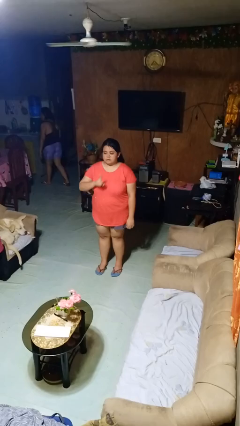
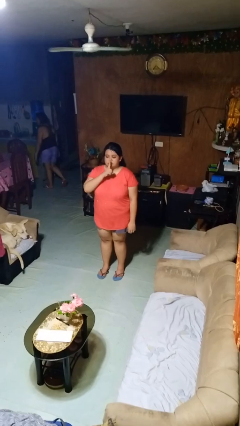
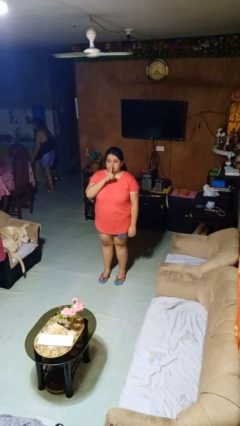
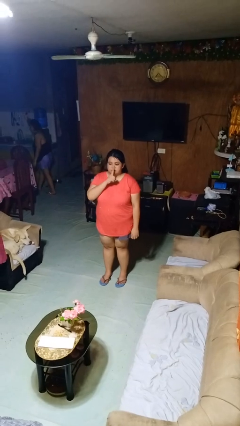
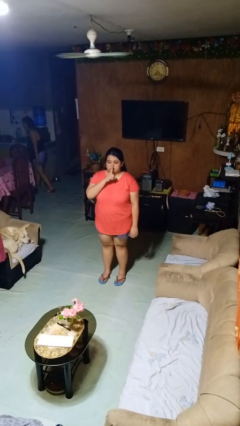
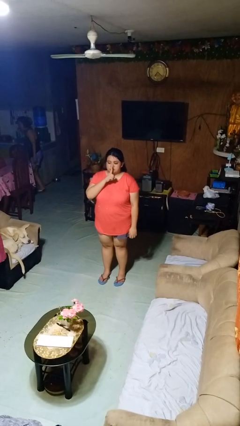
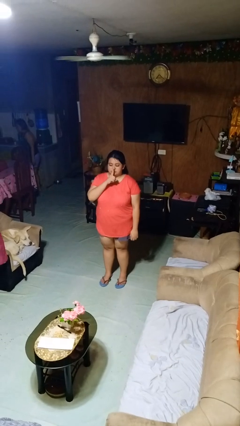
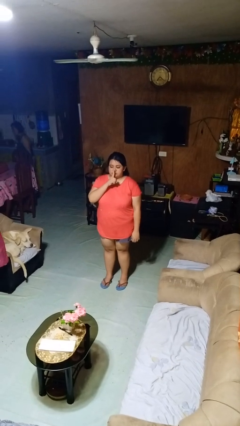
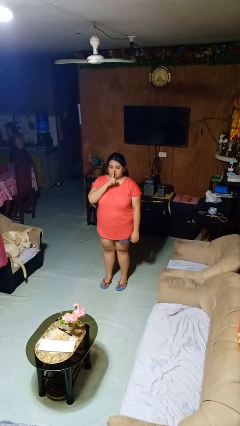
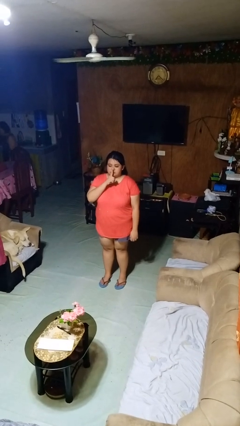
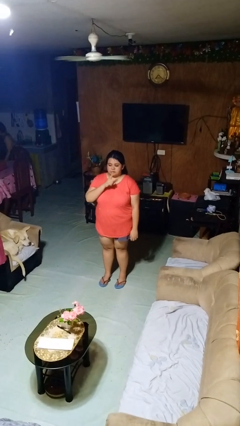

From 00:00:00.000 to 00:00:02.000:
person gestures be quiet

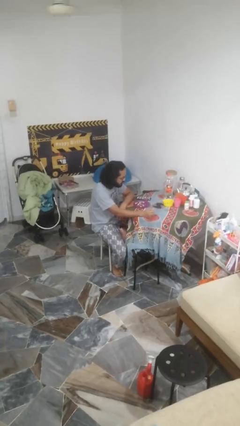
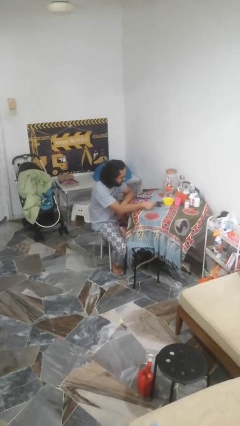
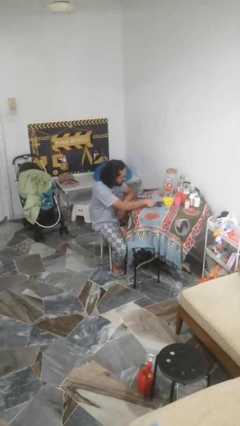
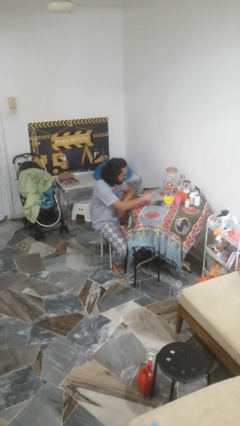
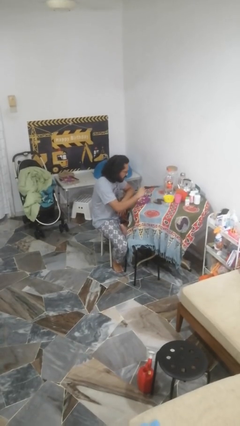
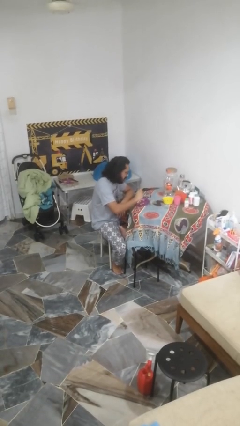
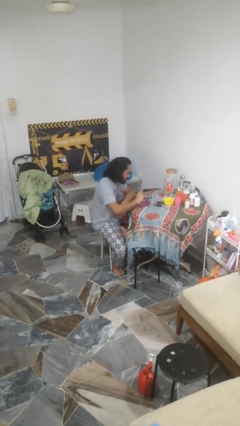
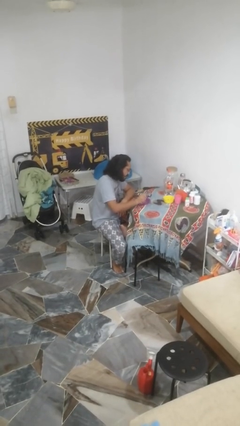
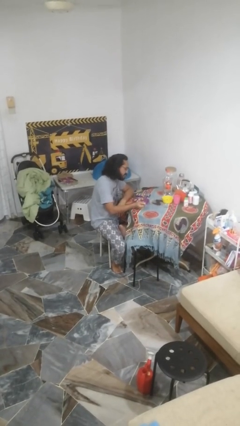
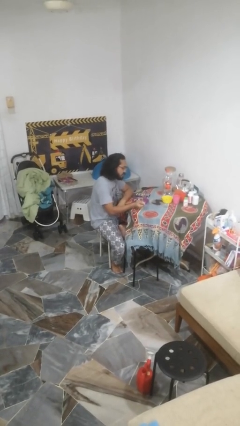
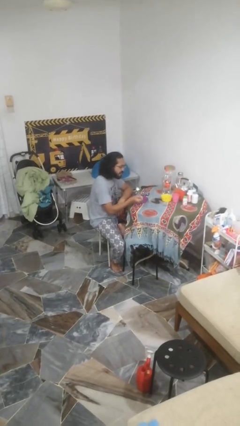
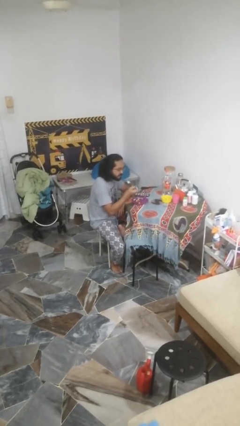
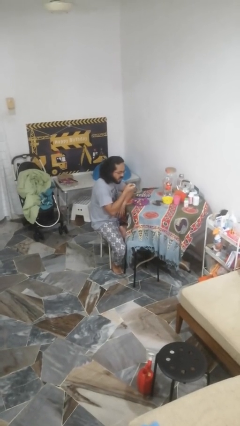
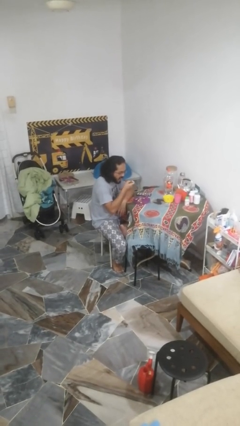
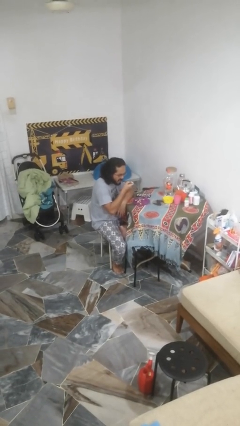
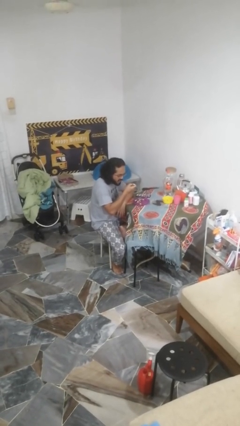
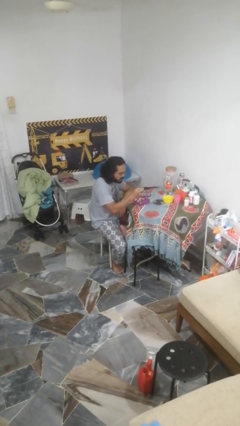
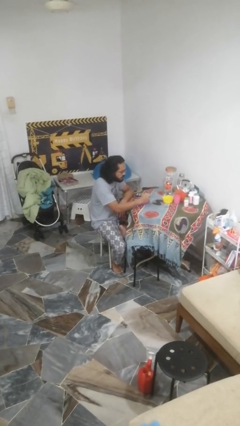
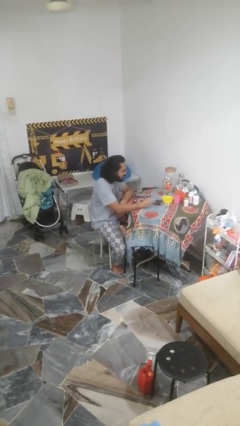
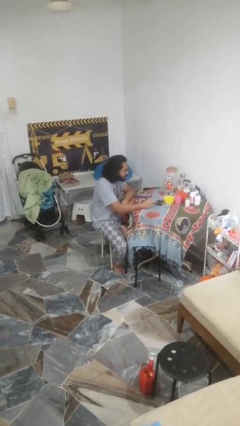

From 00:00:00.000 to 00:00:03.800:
person eats with utensil

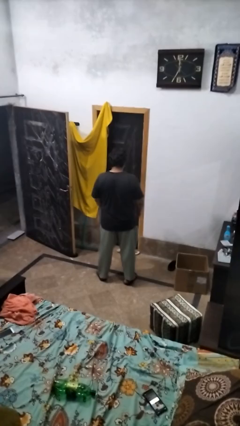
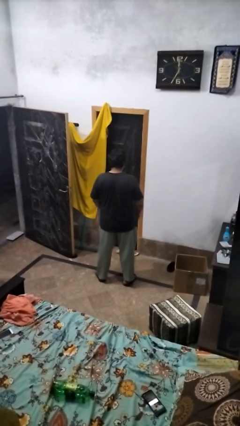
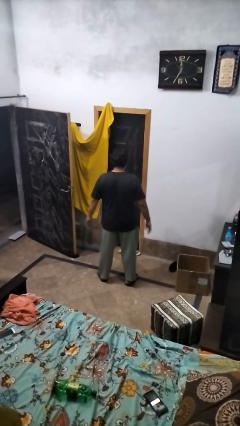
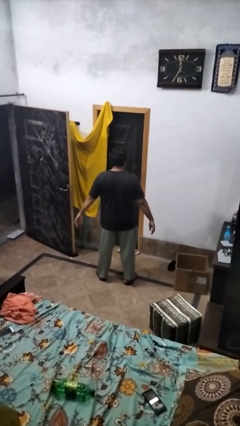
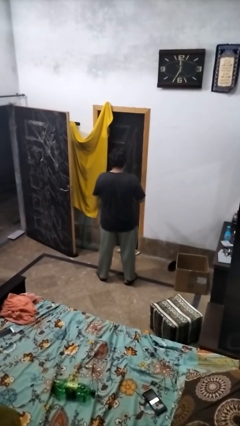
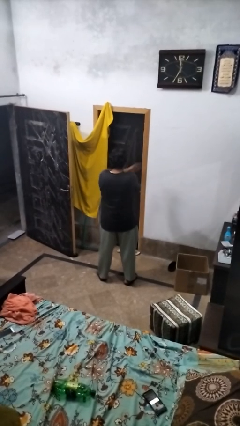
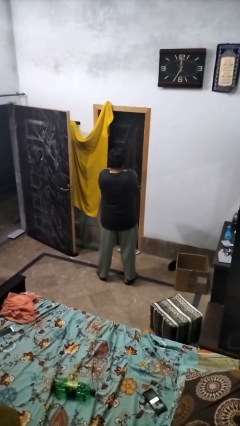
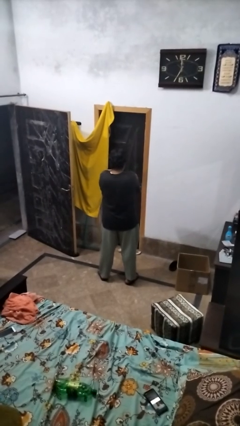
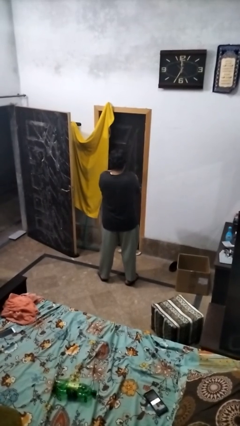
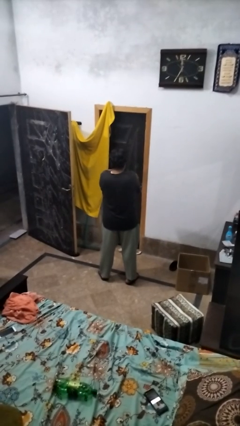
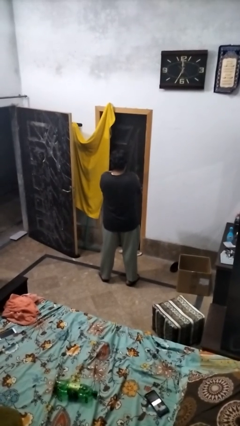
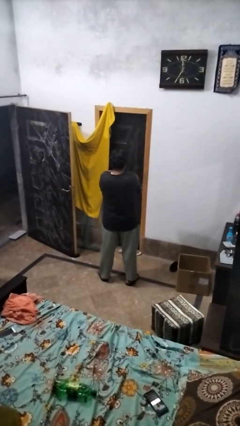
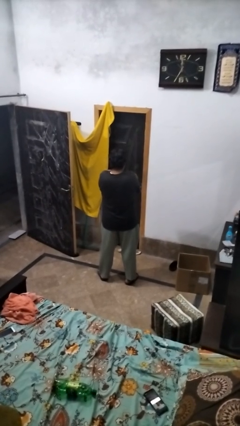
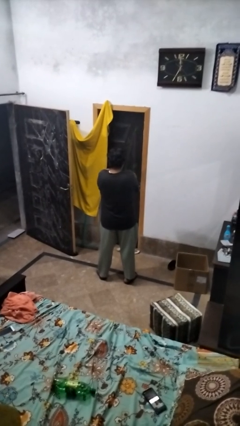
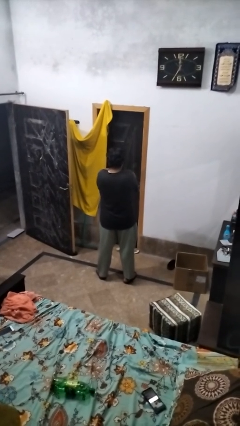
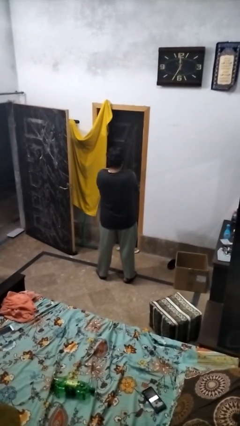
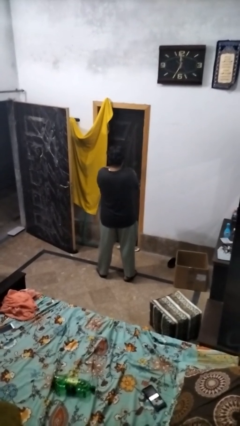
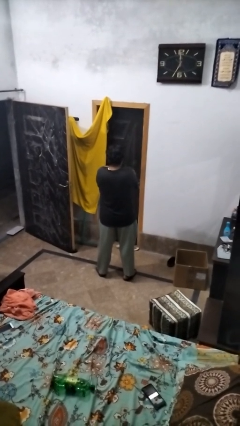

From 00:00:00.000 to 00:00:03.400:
person gestures arms x

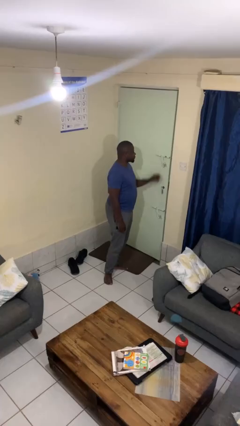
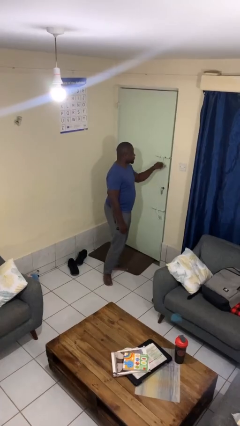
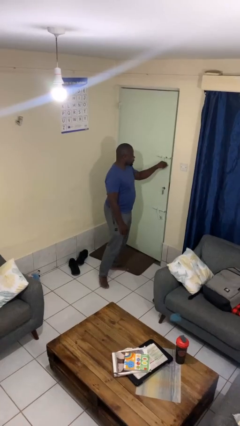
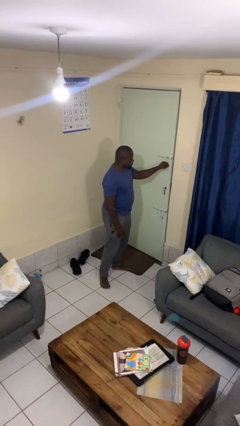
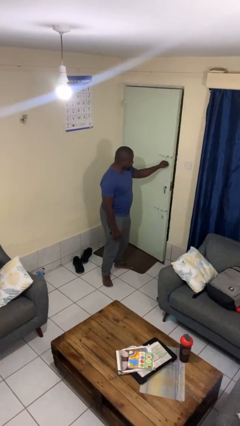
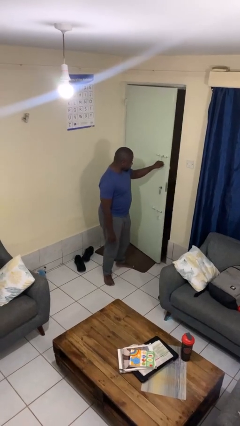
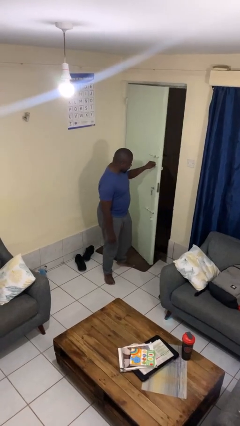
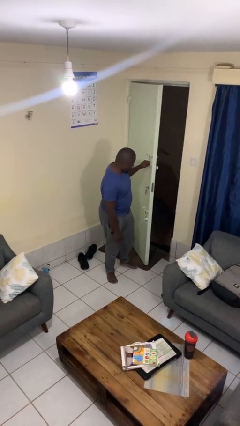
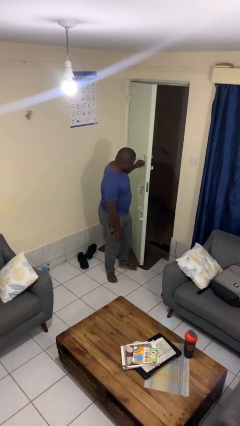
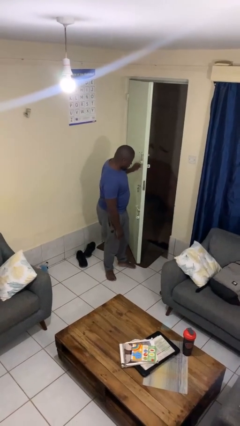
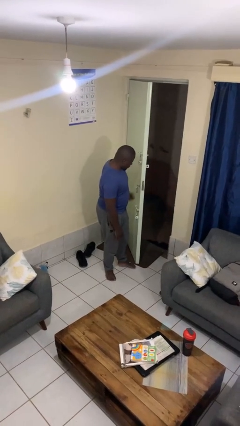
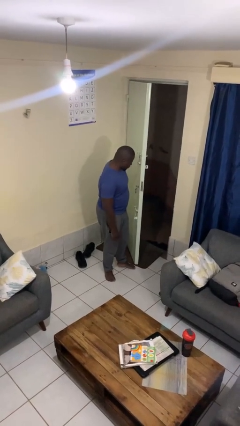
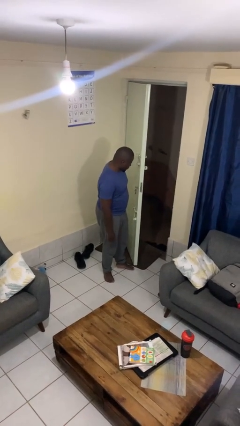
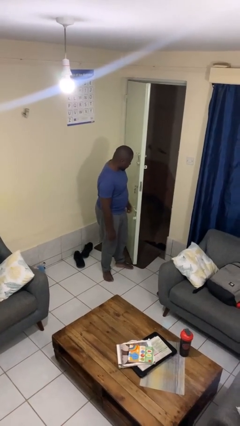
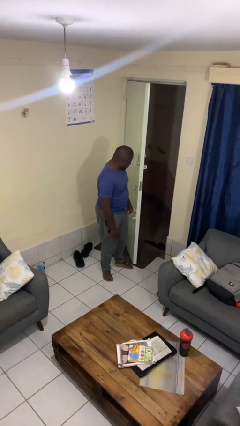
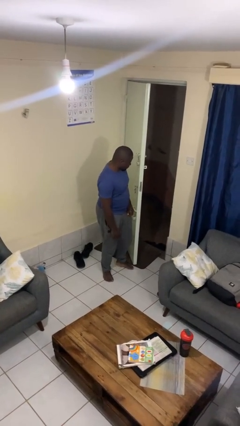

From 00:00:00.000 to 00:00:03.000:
person opens facility door

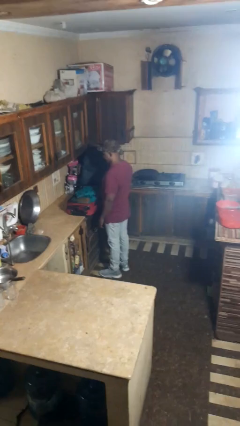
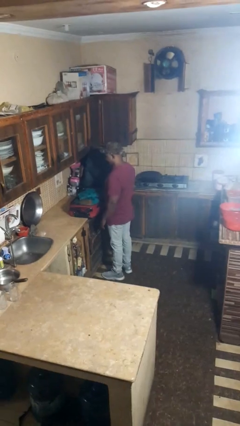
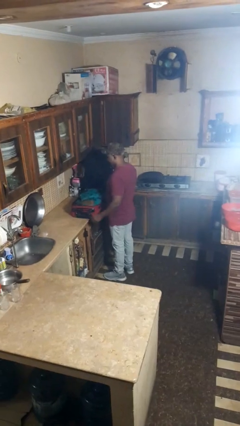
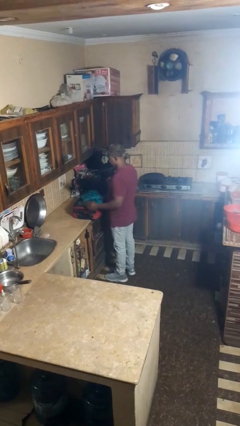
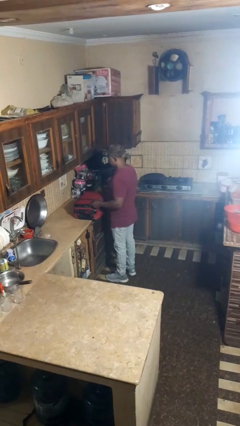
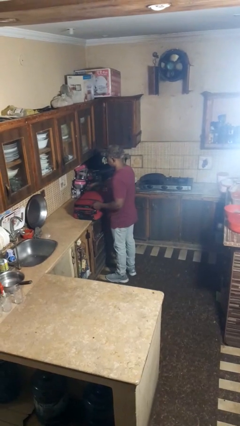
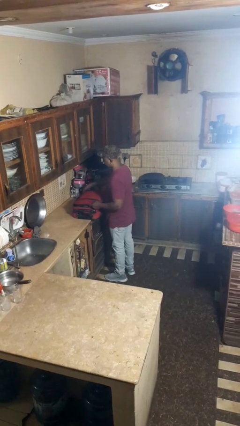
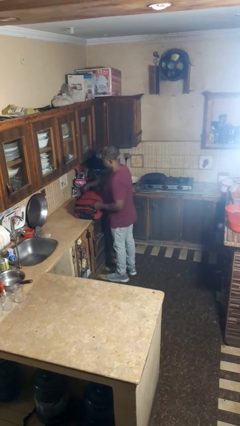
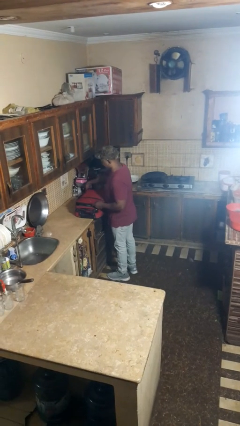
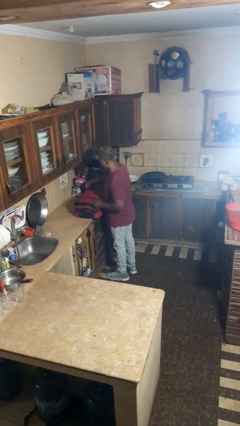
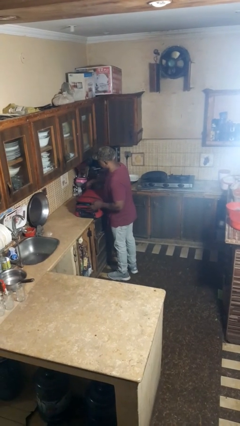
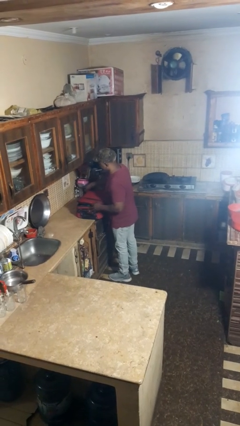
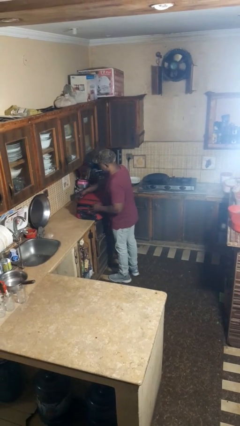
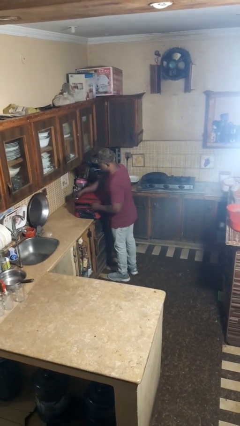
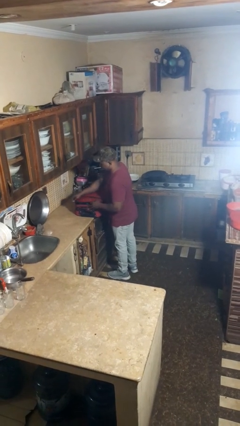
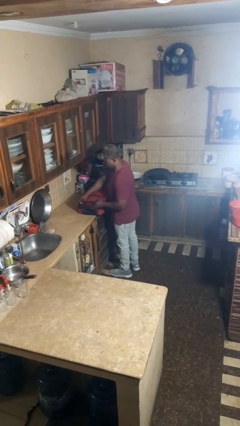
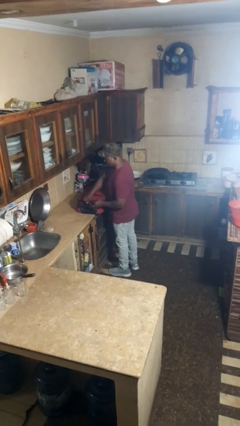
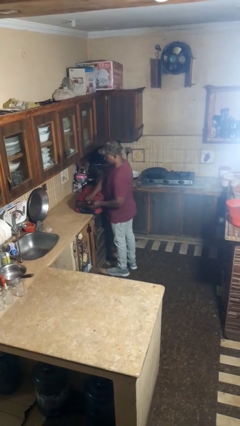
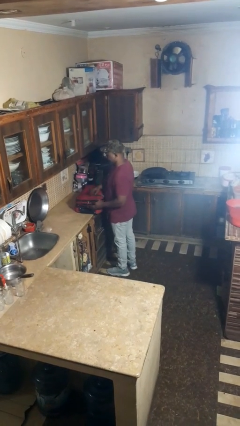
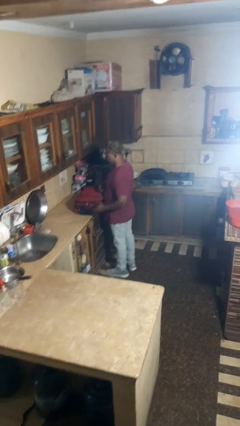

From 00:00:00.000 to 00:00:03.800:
person closes suitcase

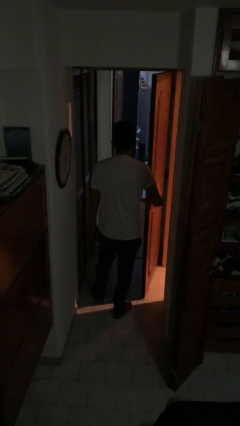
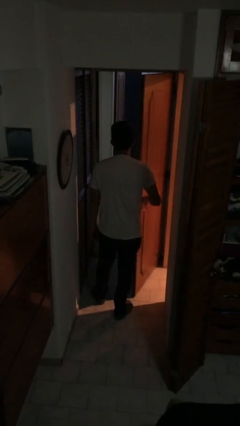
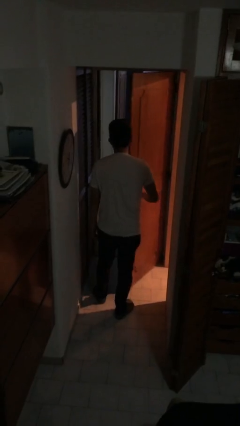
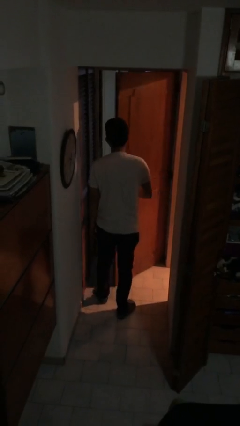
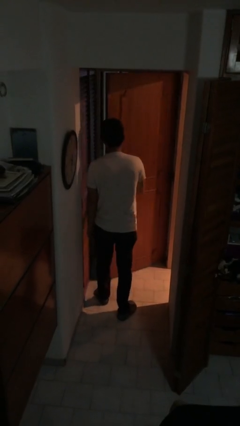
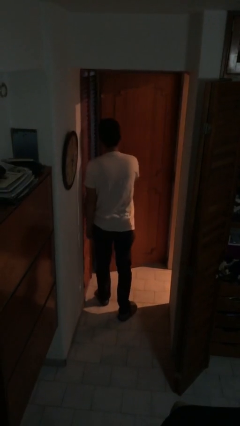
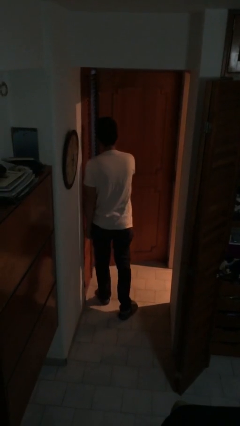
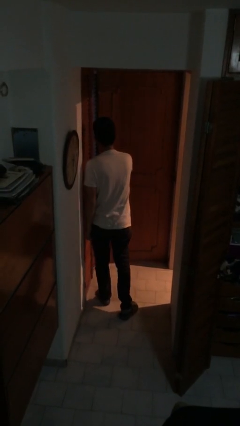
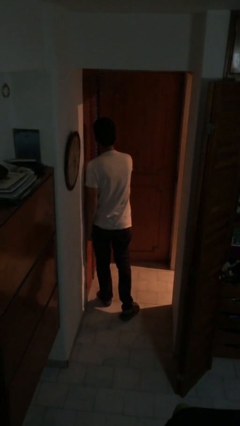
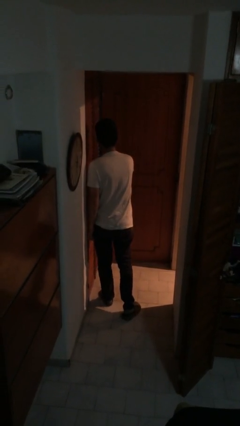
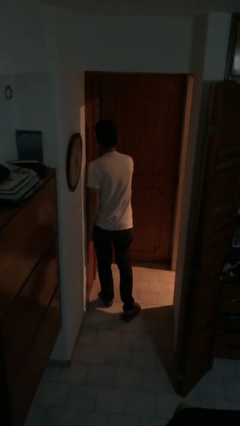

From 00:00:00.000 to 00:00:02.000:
person closes facility door
